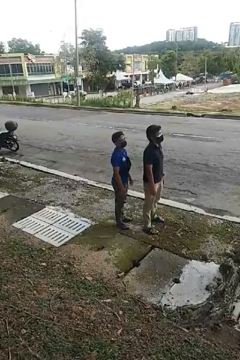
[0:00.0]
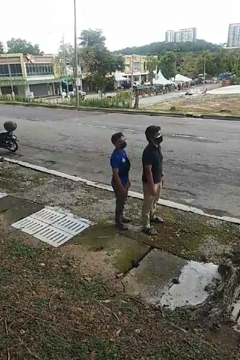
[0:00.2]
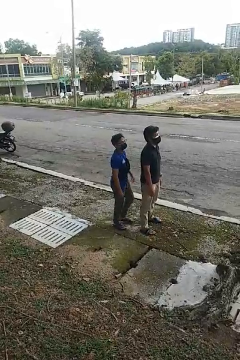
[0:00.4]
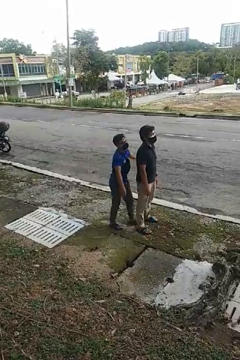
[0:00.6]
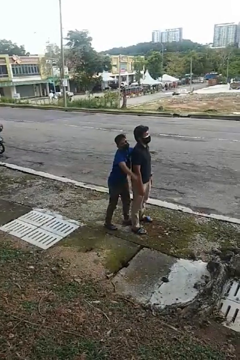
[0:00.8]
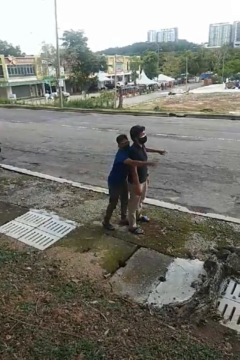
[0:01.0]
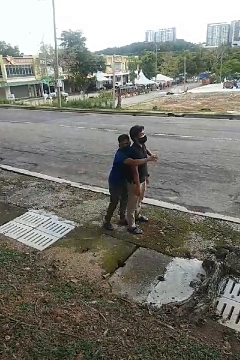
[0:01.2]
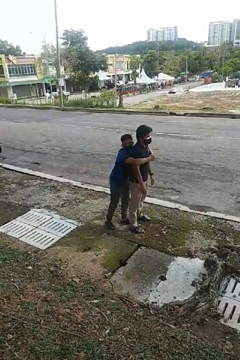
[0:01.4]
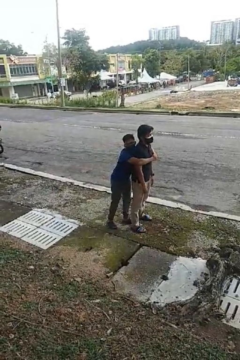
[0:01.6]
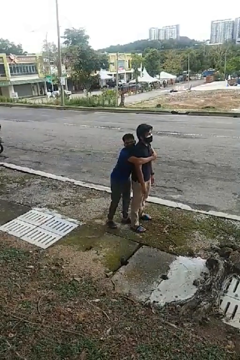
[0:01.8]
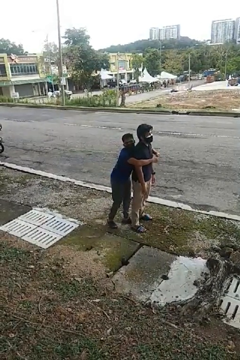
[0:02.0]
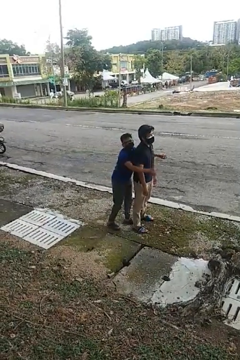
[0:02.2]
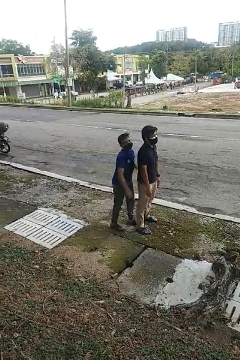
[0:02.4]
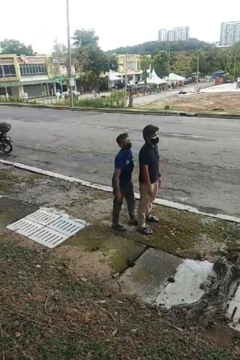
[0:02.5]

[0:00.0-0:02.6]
person hugs person from behind

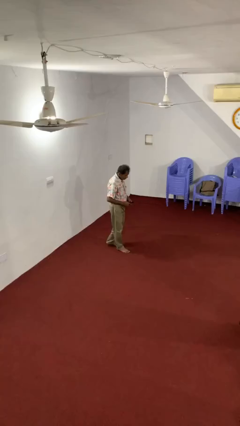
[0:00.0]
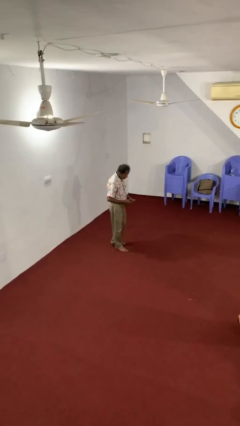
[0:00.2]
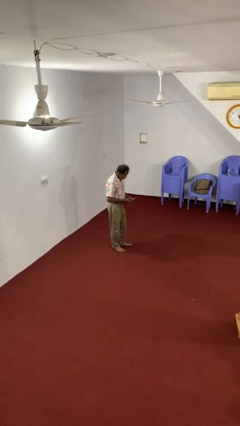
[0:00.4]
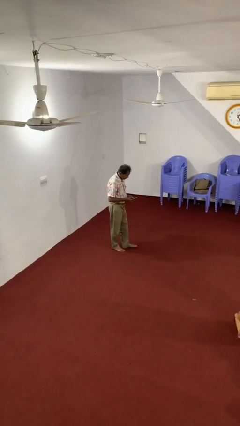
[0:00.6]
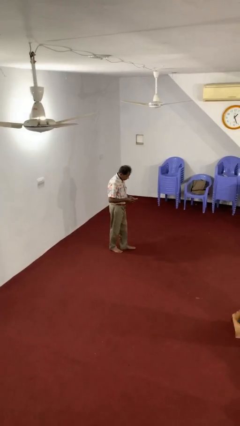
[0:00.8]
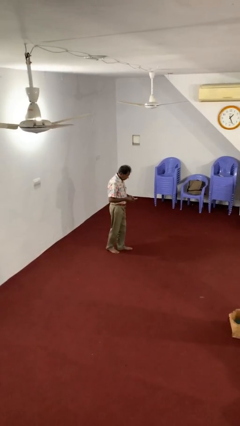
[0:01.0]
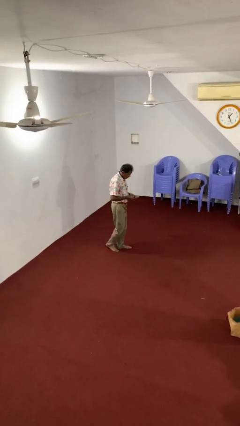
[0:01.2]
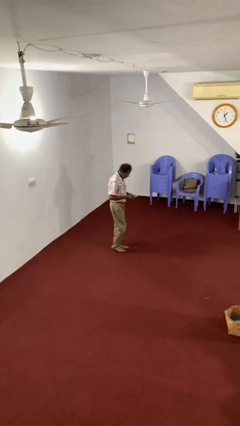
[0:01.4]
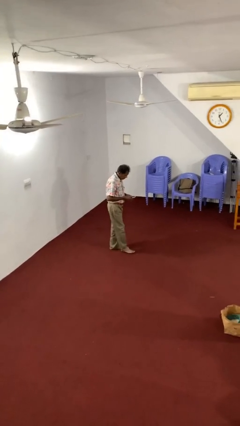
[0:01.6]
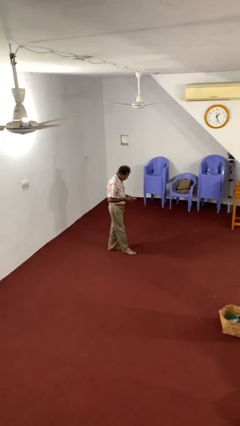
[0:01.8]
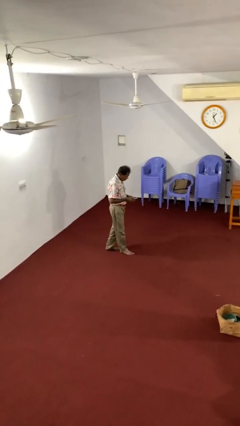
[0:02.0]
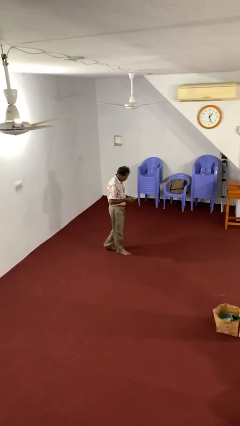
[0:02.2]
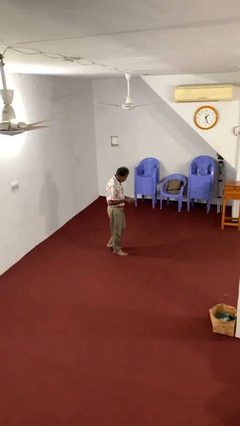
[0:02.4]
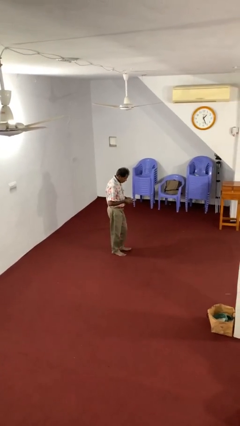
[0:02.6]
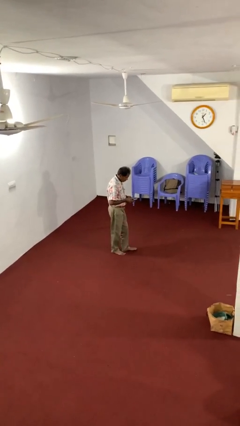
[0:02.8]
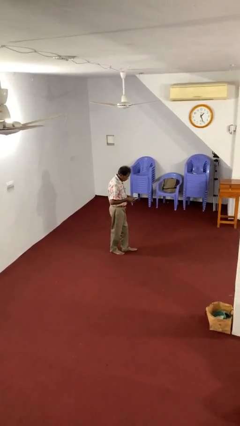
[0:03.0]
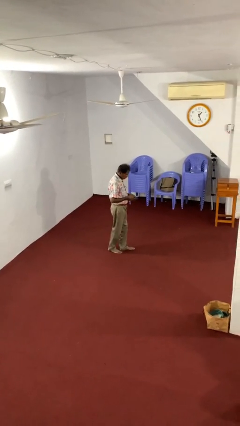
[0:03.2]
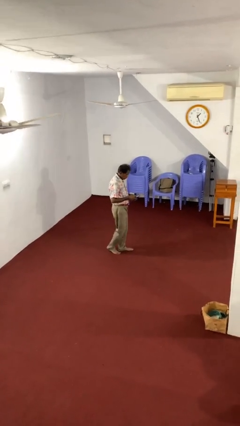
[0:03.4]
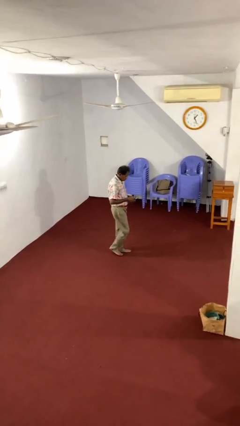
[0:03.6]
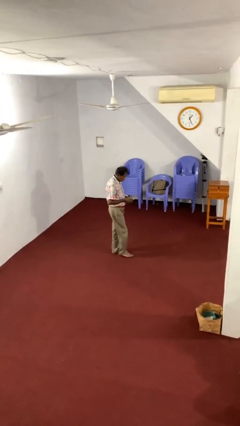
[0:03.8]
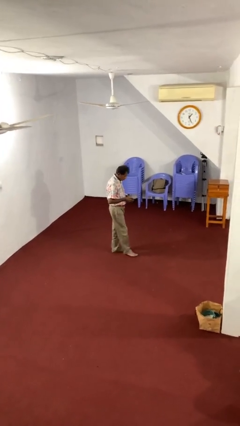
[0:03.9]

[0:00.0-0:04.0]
person texts on phone

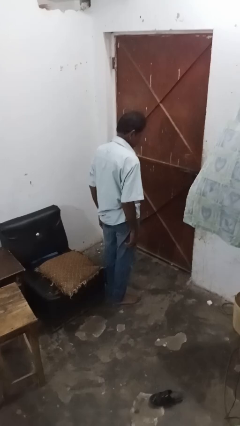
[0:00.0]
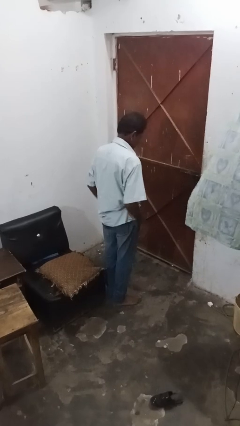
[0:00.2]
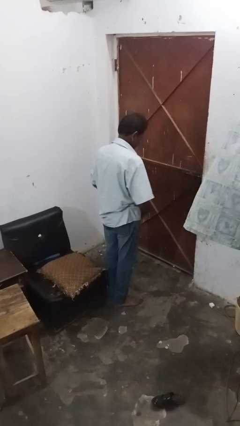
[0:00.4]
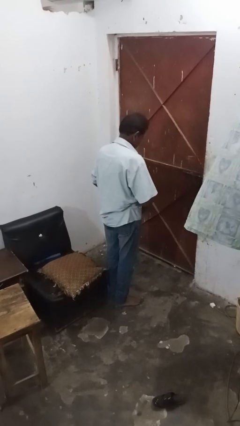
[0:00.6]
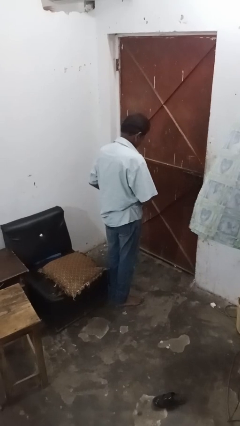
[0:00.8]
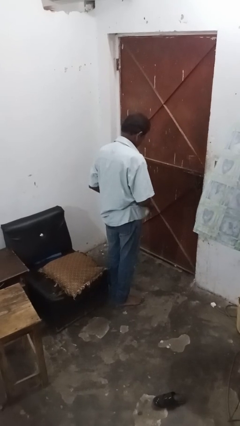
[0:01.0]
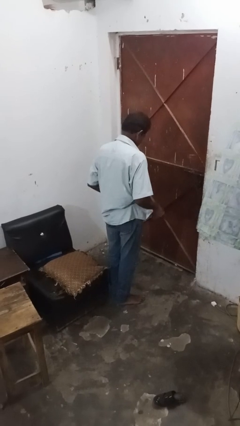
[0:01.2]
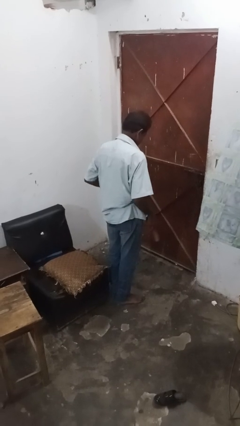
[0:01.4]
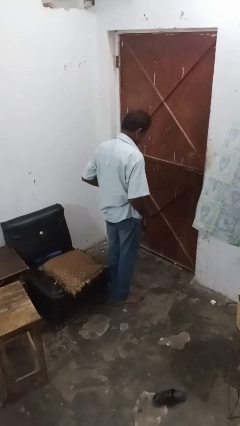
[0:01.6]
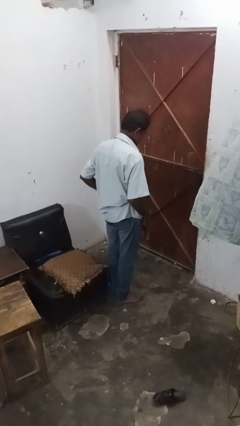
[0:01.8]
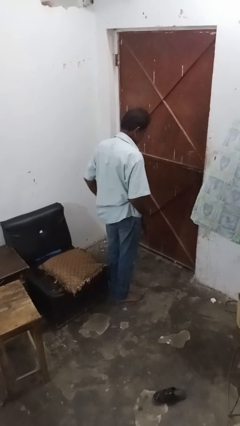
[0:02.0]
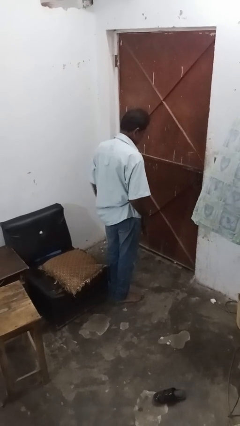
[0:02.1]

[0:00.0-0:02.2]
person takes off belt

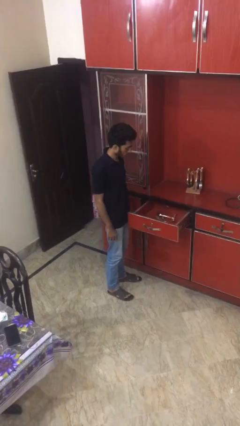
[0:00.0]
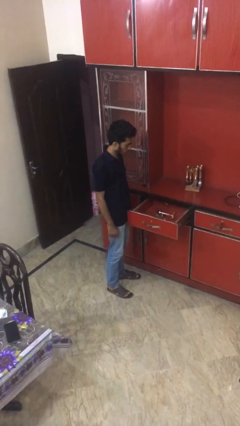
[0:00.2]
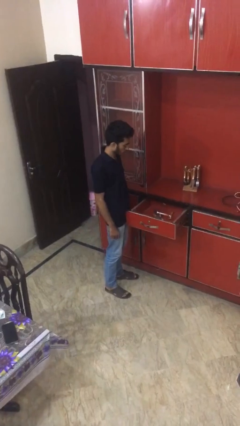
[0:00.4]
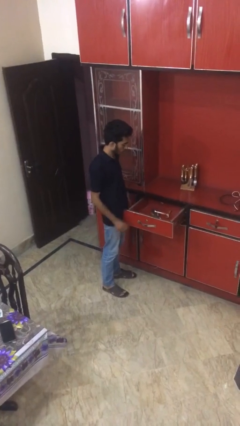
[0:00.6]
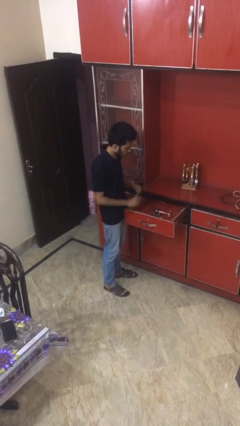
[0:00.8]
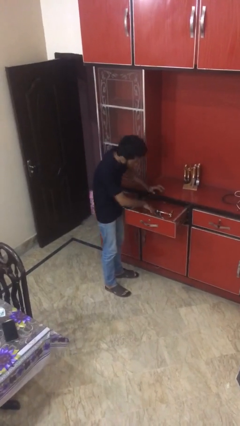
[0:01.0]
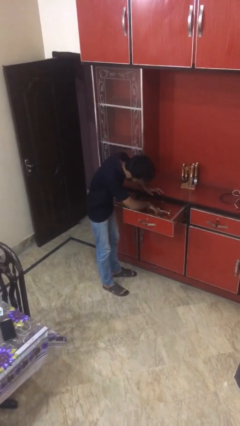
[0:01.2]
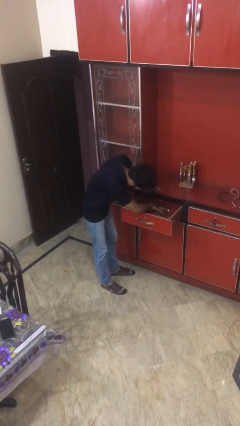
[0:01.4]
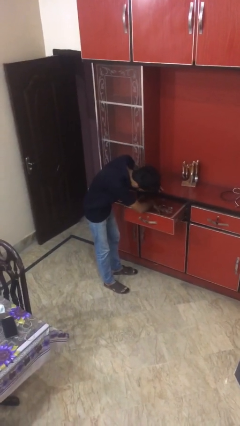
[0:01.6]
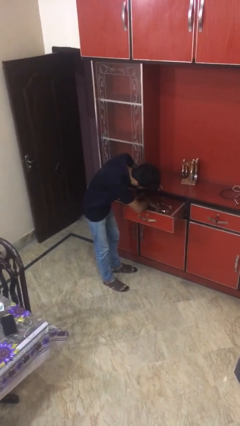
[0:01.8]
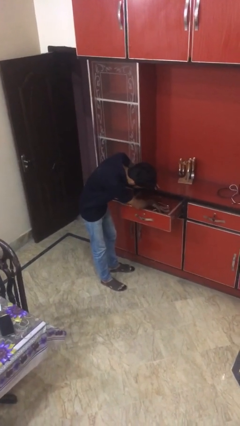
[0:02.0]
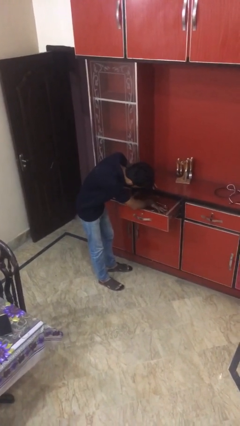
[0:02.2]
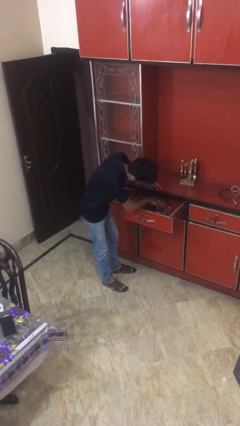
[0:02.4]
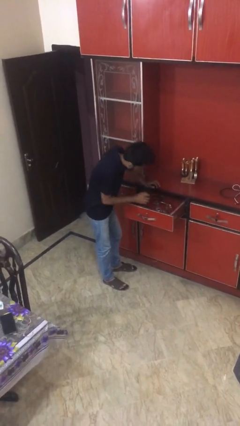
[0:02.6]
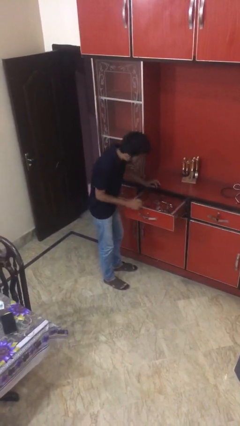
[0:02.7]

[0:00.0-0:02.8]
person searches in kitchen drawer

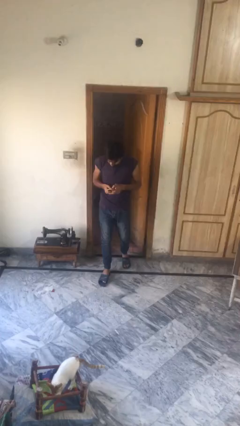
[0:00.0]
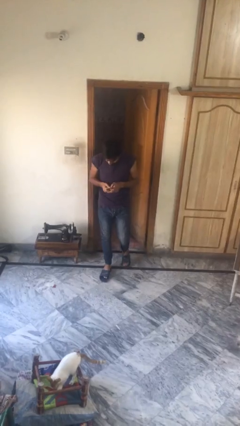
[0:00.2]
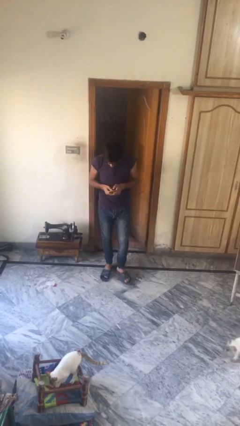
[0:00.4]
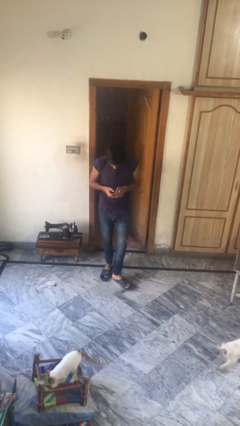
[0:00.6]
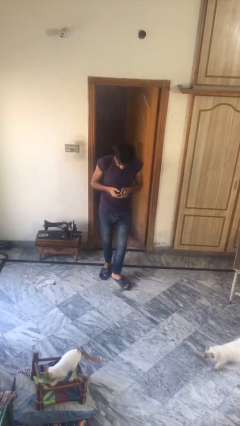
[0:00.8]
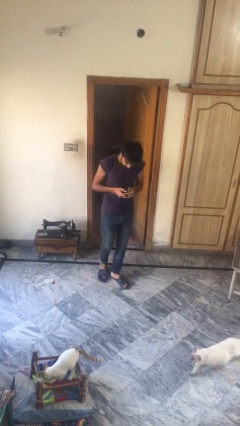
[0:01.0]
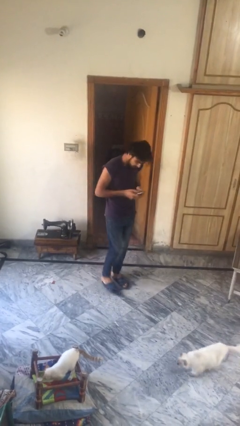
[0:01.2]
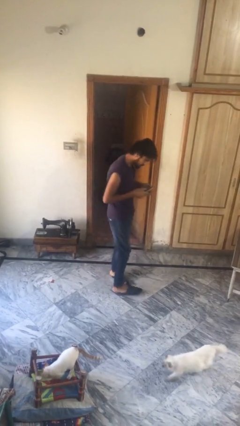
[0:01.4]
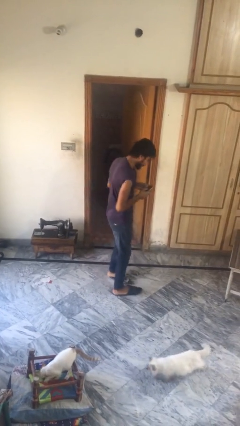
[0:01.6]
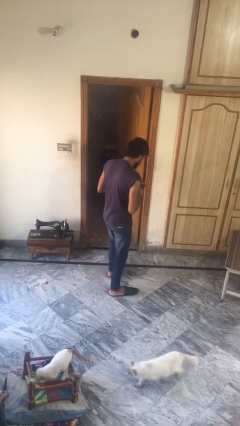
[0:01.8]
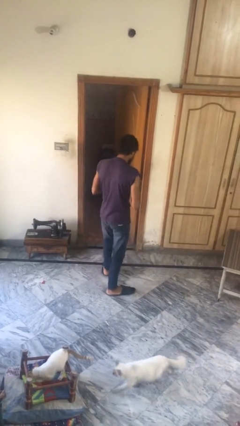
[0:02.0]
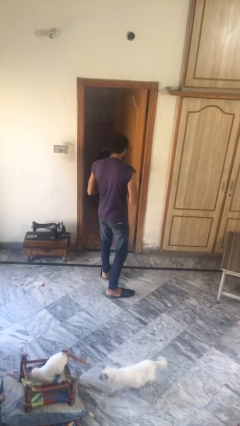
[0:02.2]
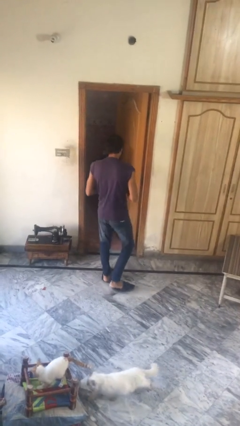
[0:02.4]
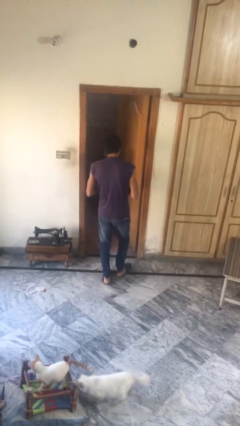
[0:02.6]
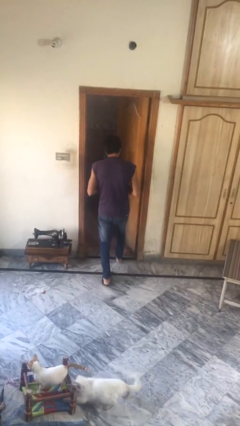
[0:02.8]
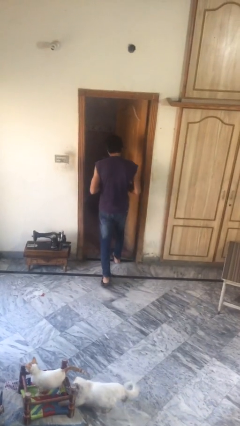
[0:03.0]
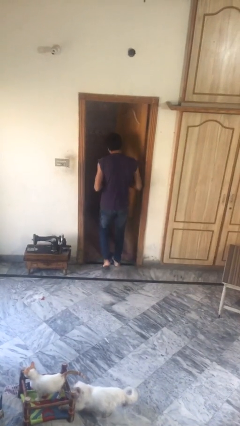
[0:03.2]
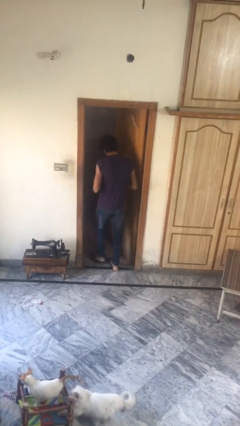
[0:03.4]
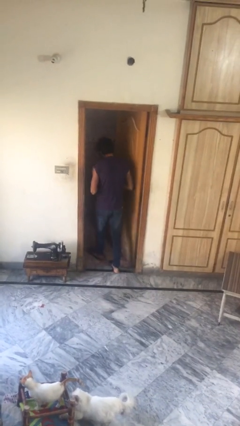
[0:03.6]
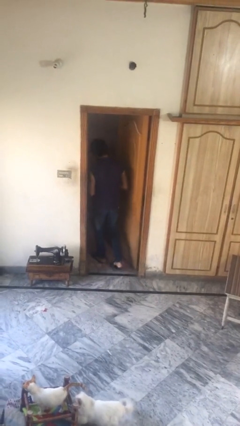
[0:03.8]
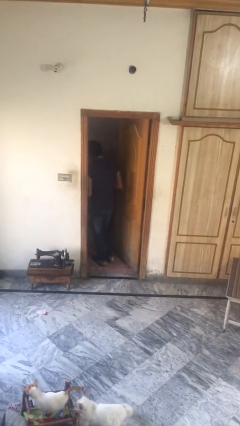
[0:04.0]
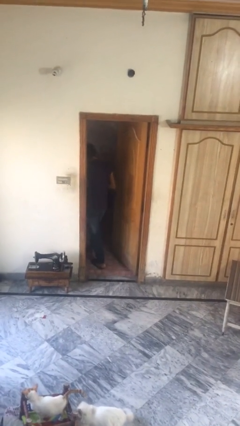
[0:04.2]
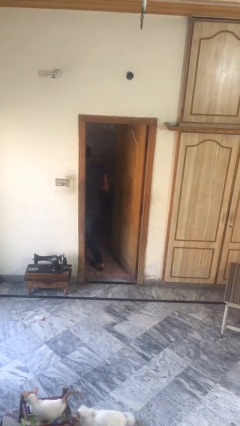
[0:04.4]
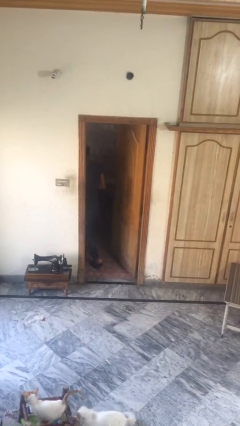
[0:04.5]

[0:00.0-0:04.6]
person exits scene through structure

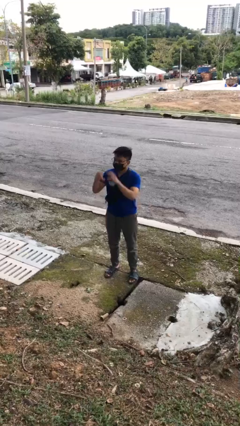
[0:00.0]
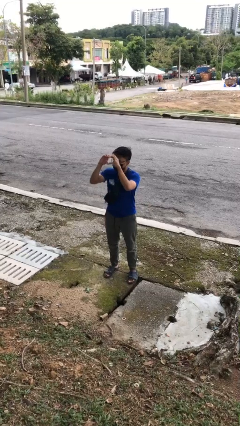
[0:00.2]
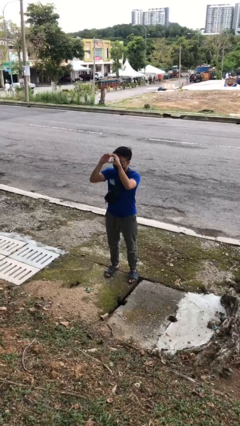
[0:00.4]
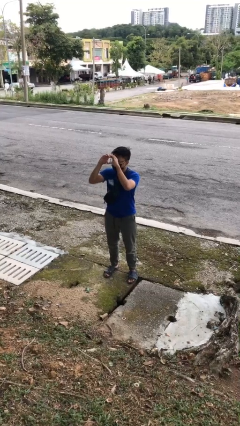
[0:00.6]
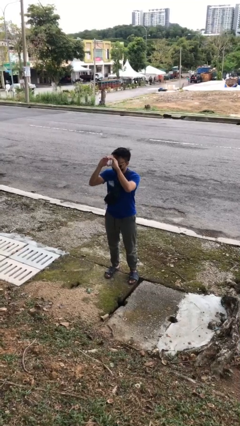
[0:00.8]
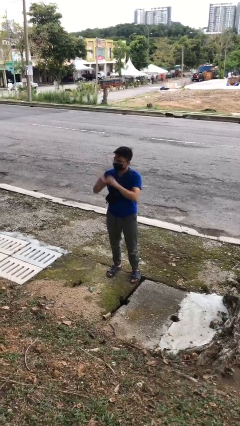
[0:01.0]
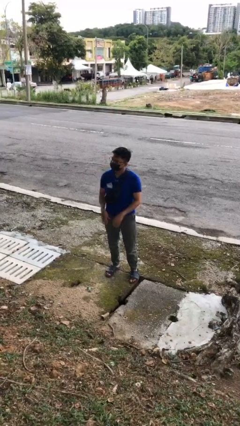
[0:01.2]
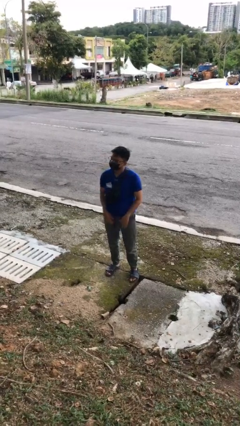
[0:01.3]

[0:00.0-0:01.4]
person gestures heart
